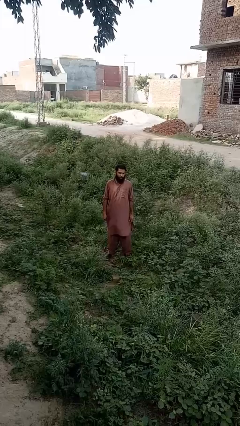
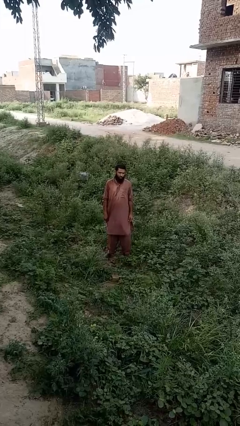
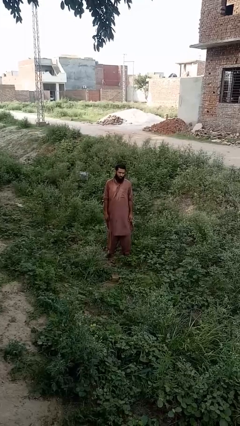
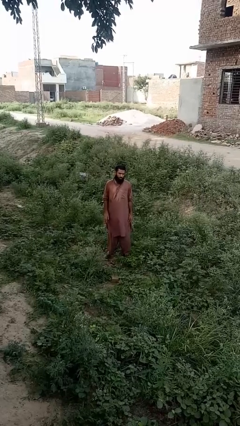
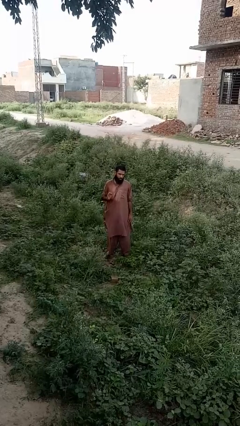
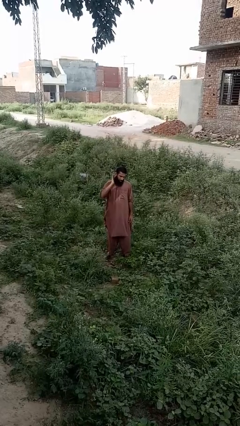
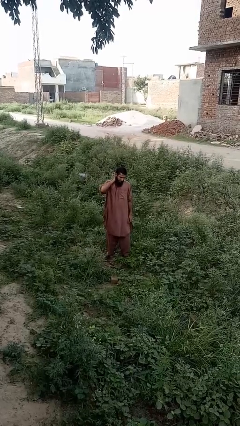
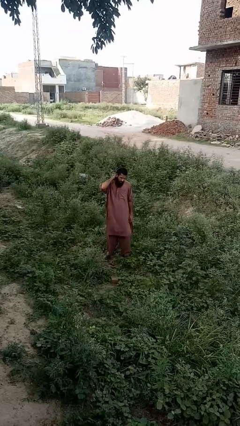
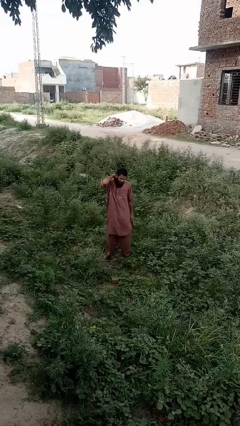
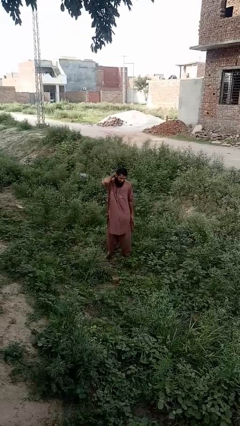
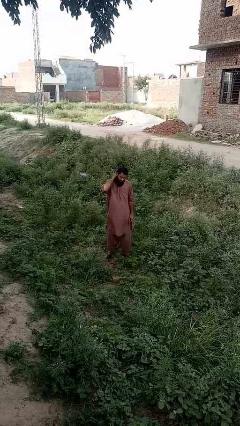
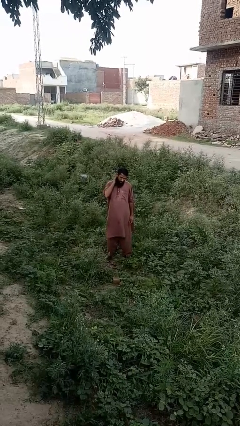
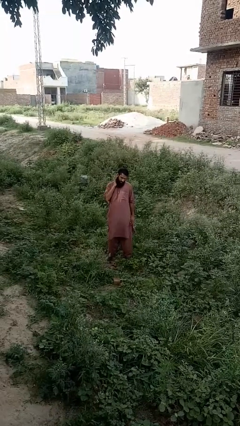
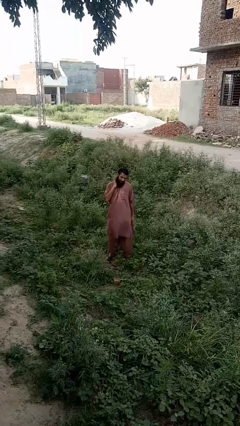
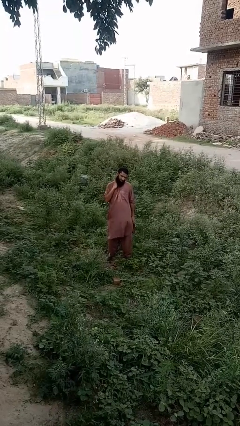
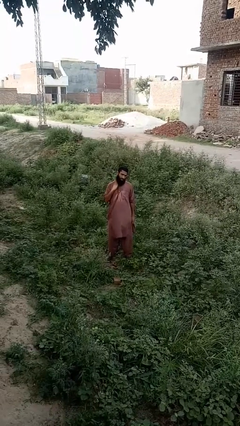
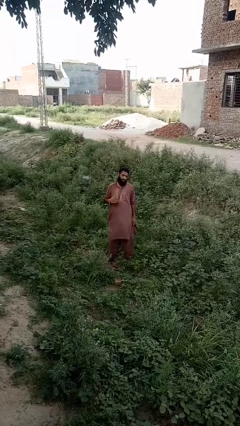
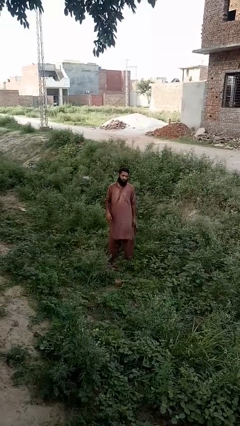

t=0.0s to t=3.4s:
person rubs neck

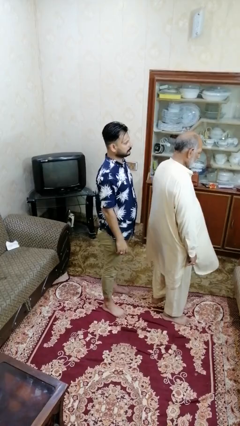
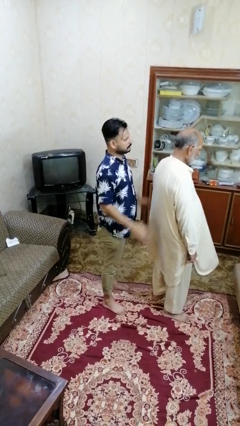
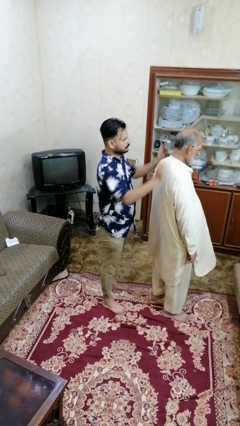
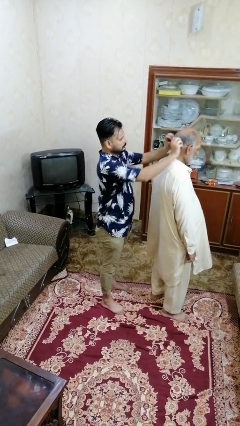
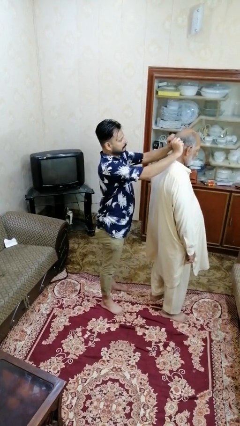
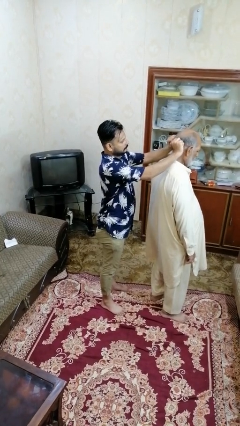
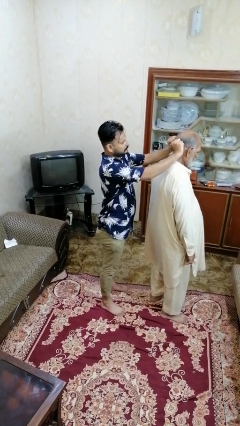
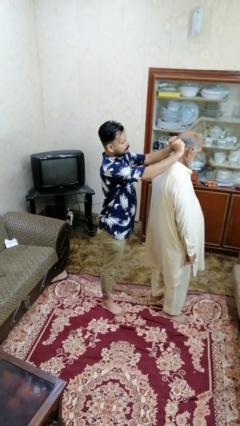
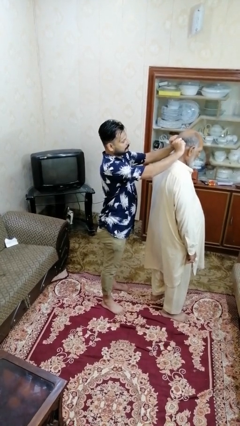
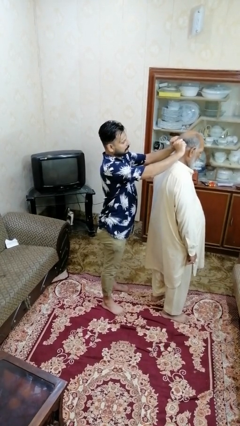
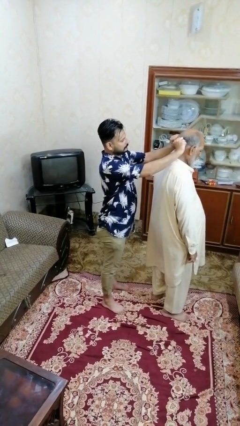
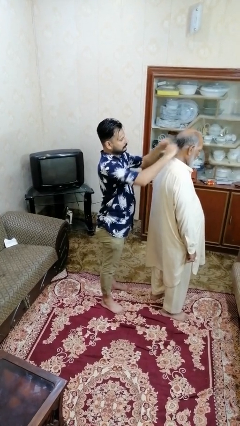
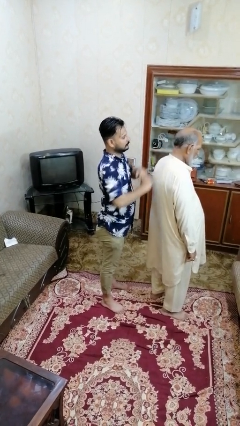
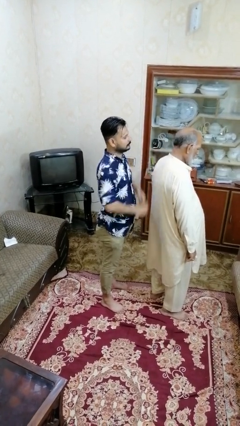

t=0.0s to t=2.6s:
person grabs person by hair

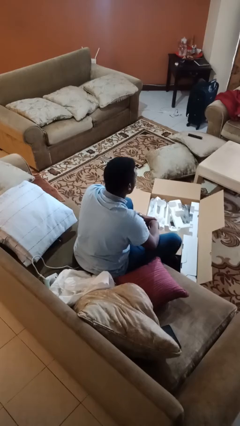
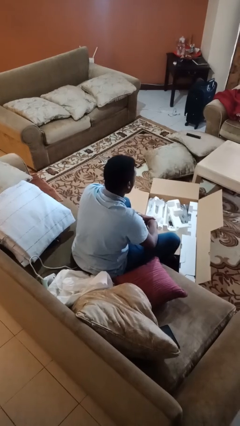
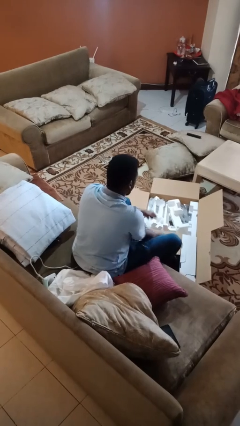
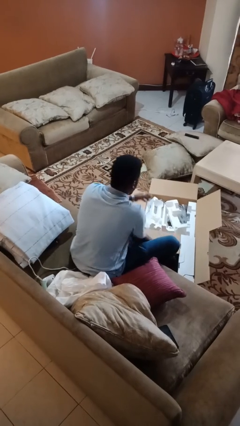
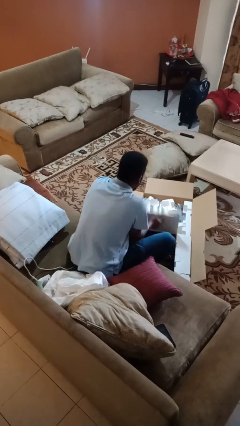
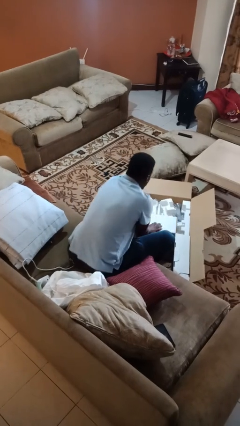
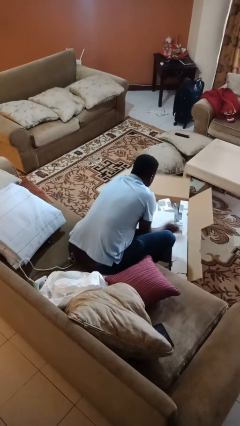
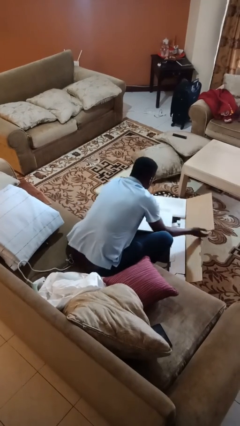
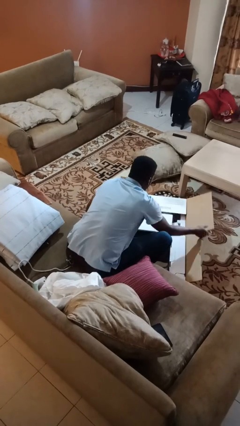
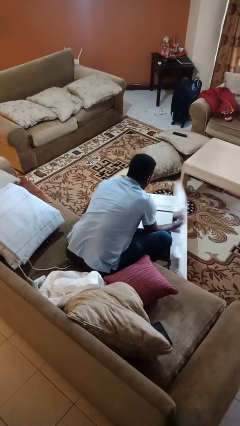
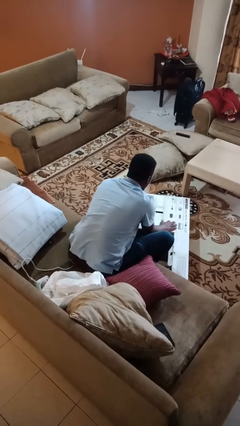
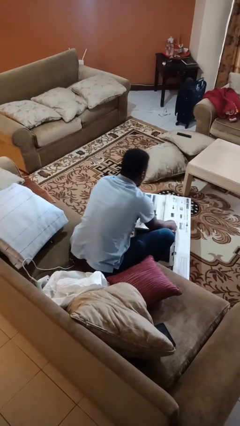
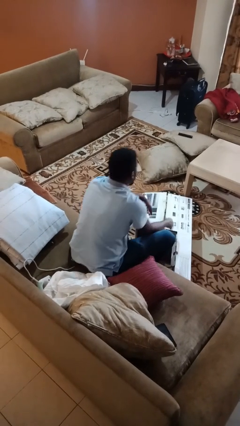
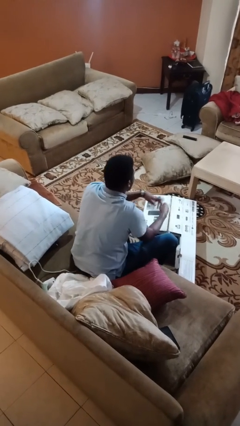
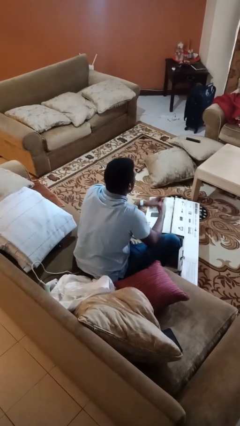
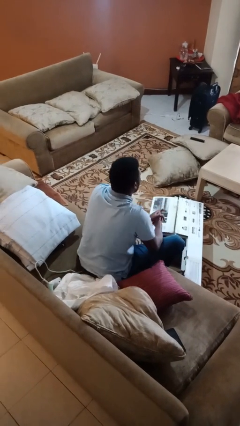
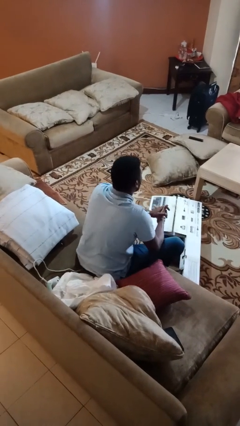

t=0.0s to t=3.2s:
person closes box

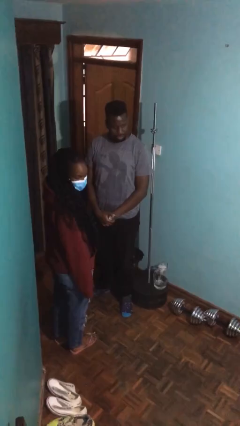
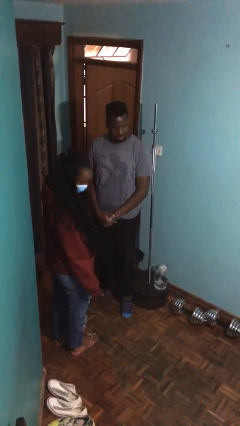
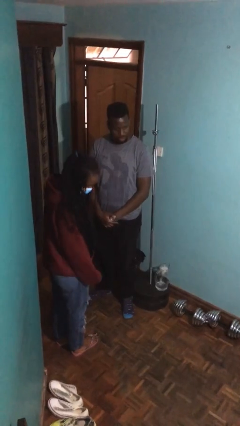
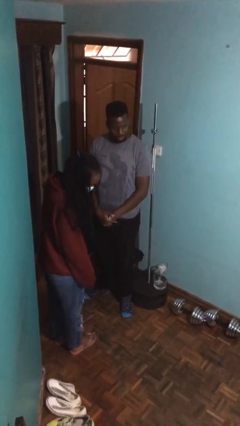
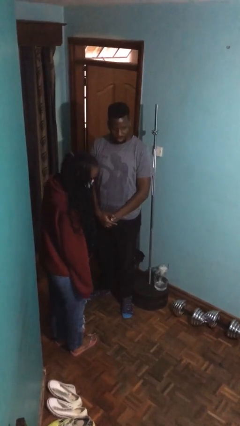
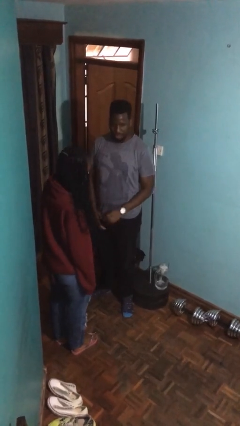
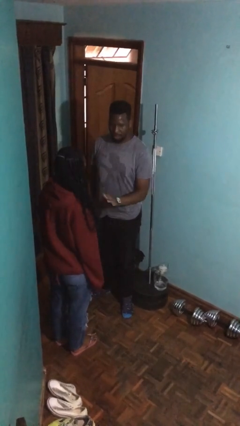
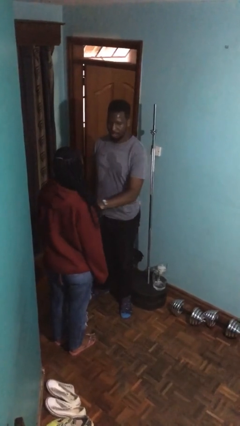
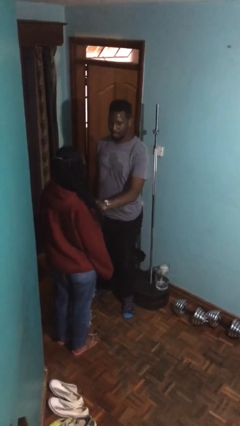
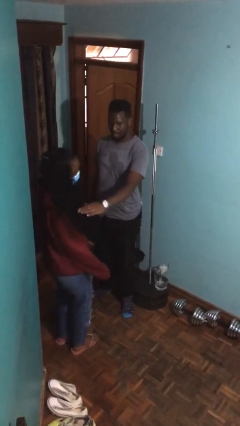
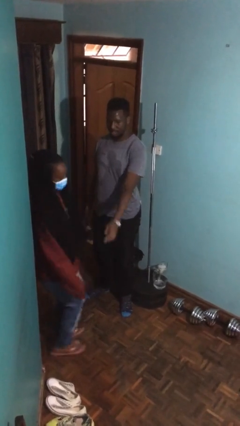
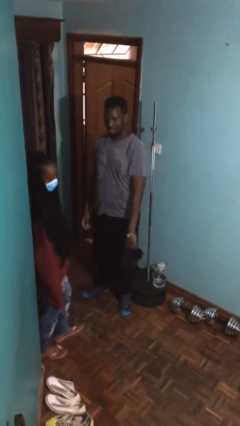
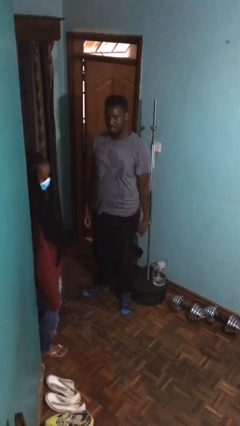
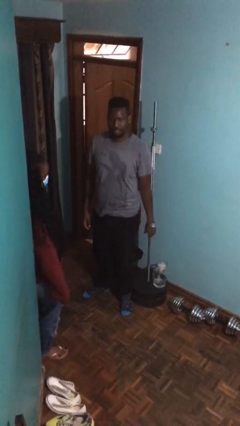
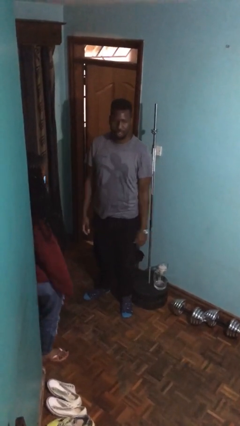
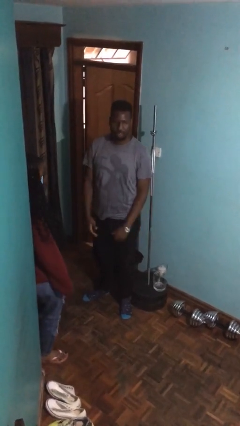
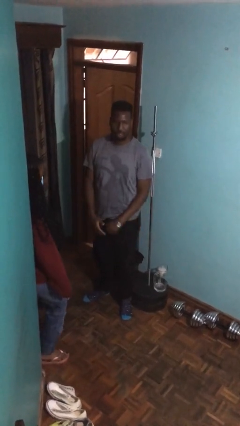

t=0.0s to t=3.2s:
person shoves person

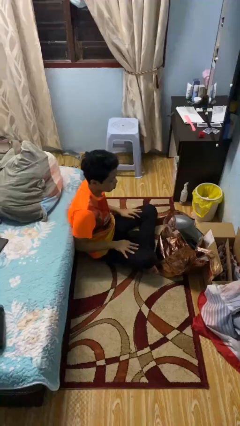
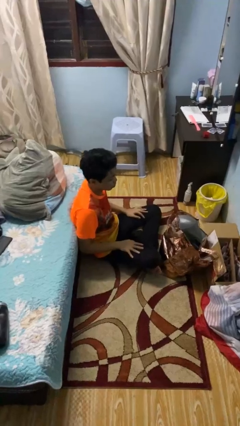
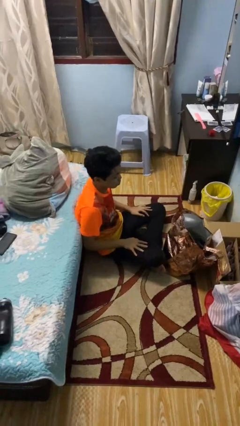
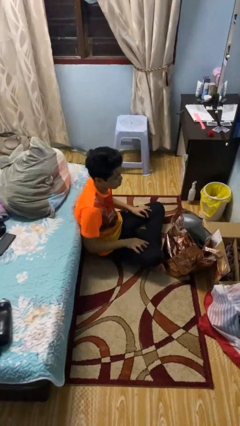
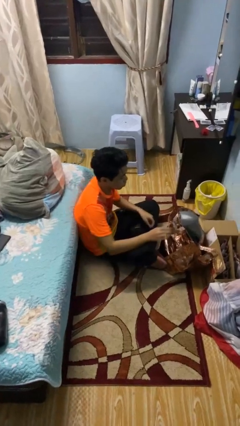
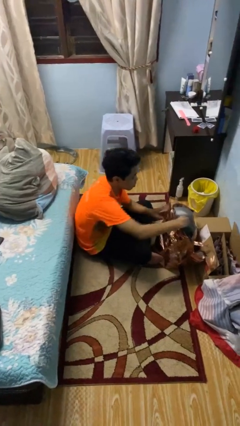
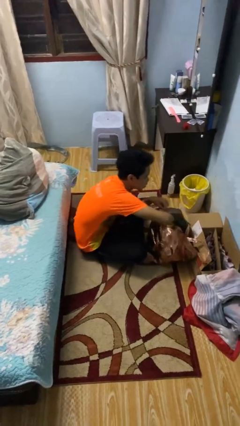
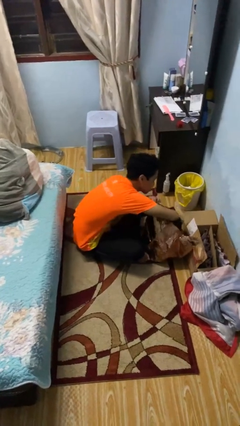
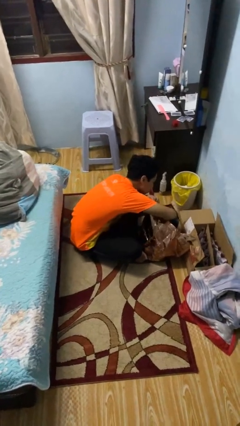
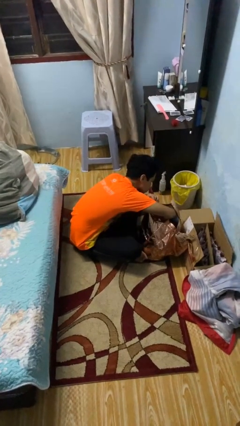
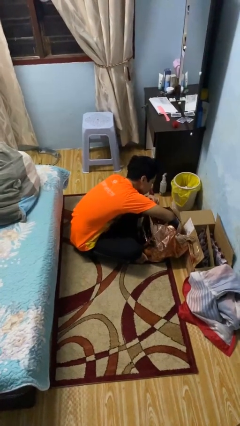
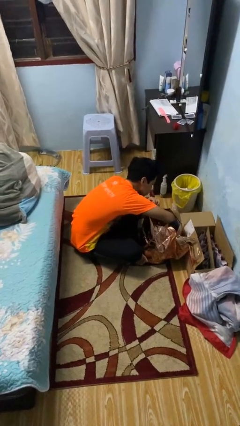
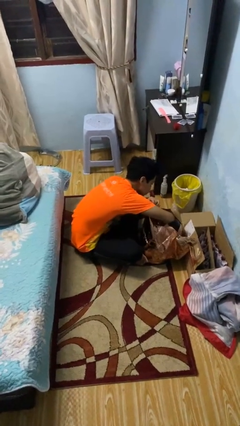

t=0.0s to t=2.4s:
person searches in bag

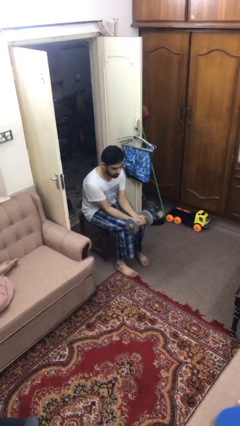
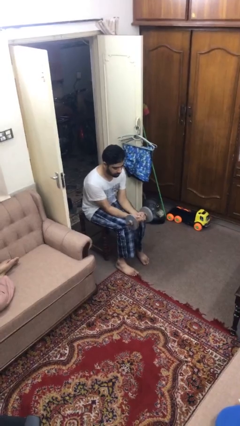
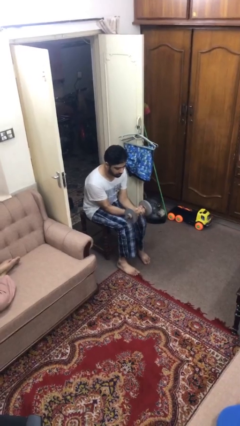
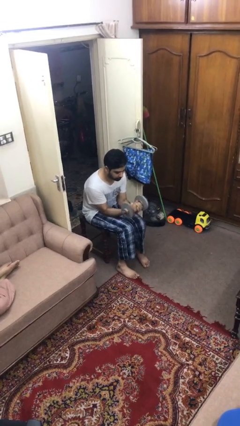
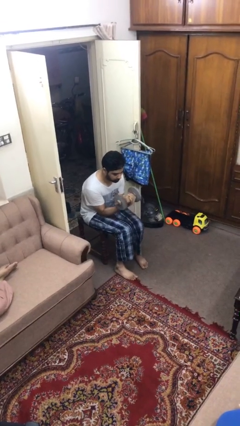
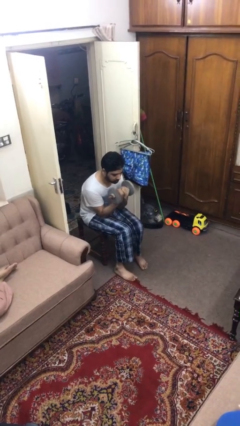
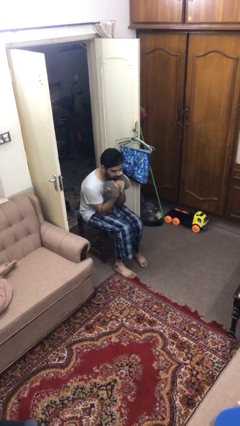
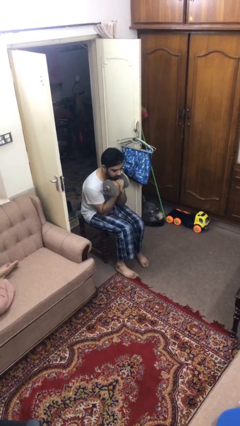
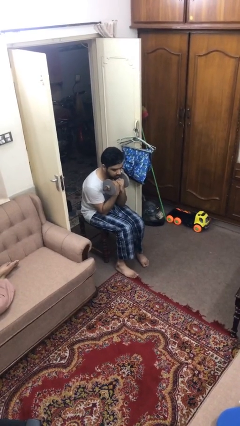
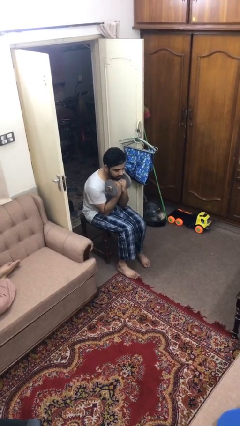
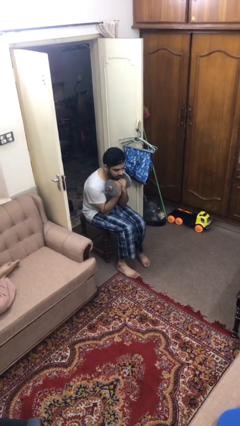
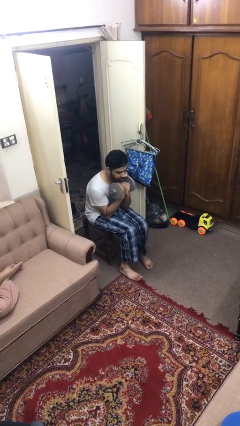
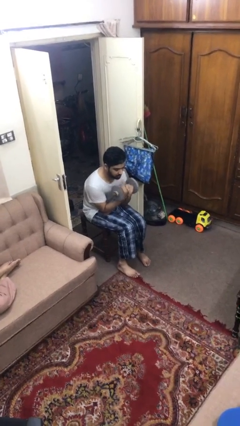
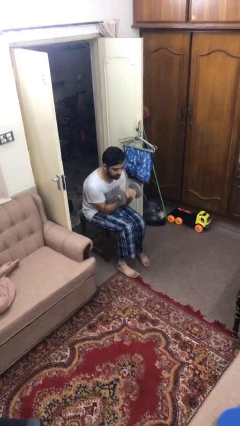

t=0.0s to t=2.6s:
person lifts dumbbells
